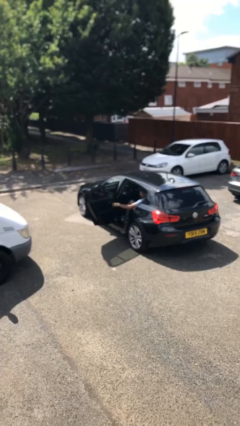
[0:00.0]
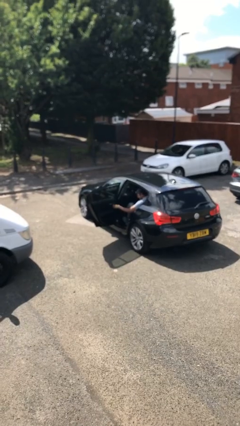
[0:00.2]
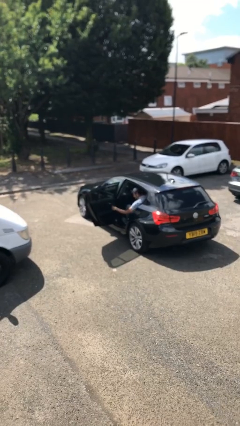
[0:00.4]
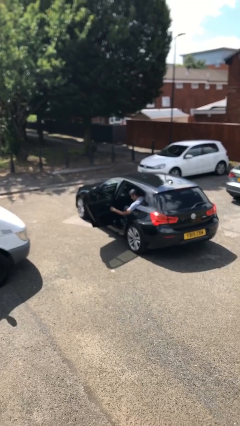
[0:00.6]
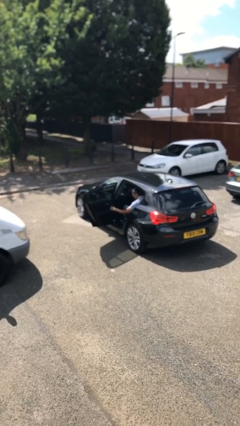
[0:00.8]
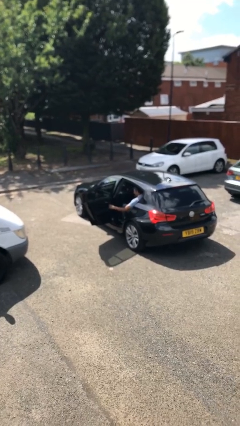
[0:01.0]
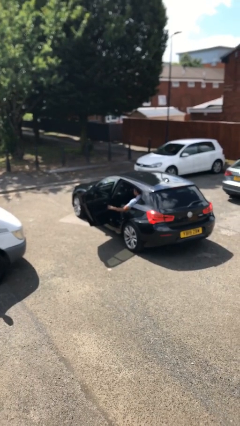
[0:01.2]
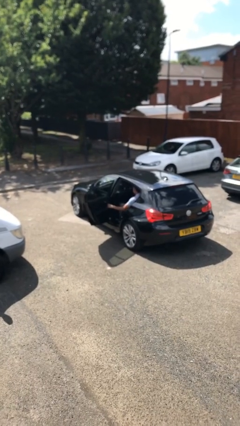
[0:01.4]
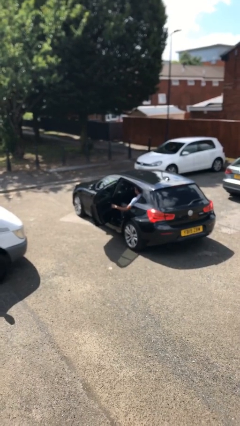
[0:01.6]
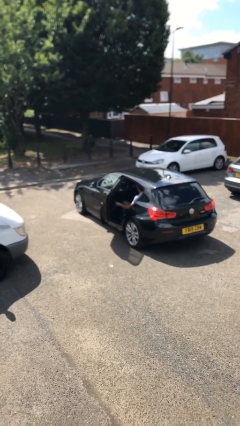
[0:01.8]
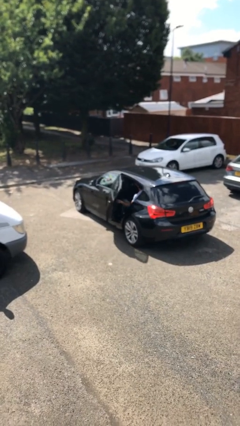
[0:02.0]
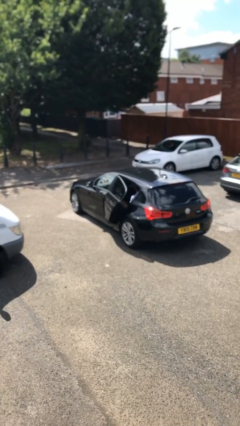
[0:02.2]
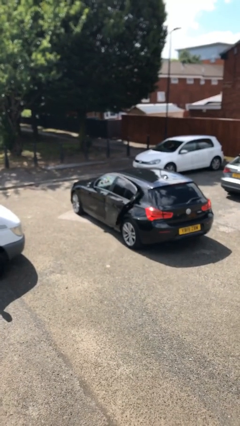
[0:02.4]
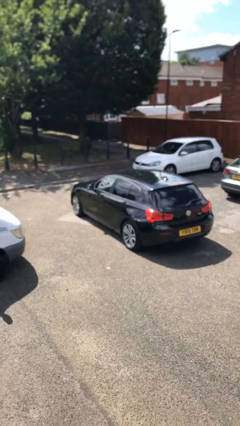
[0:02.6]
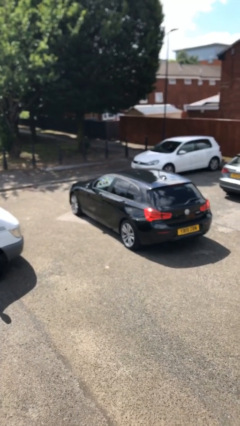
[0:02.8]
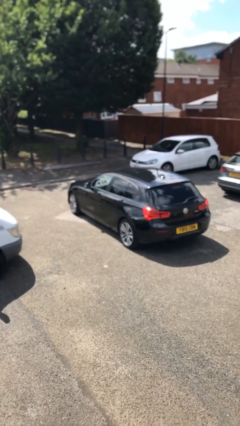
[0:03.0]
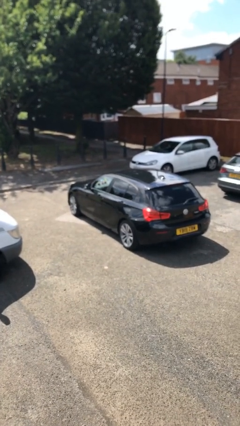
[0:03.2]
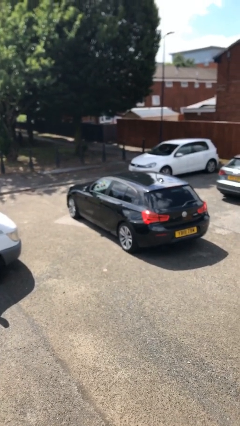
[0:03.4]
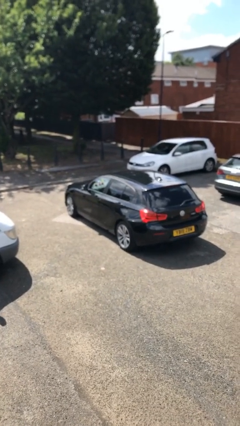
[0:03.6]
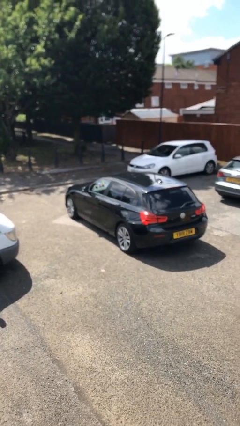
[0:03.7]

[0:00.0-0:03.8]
person closes car door

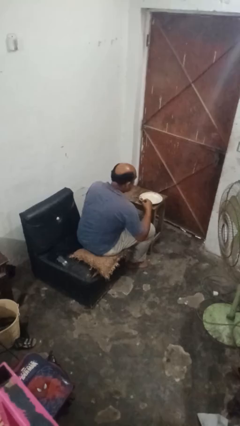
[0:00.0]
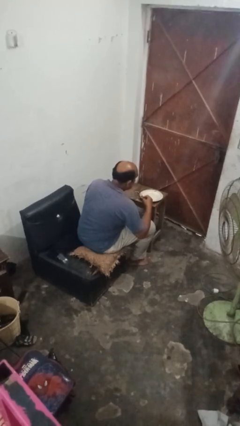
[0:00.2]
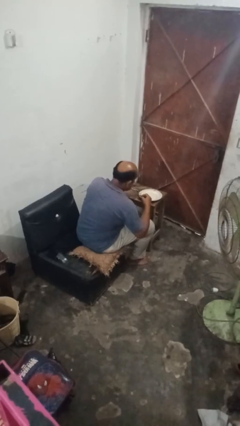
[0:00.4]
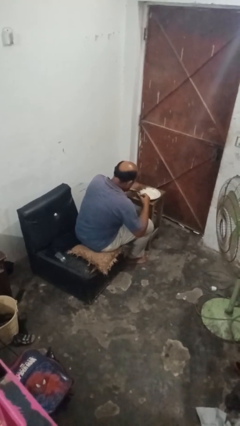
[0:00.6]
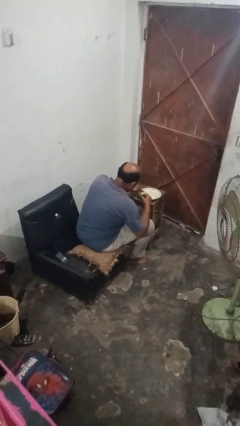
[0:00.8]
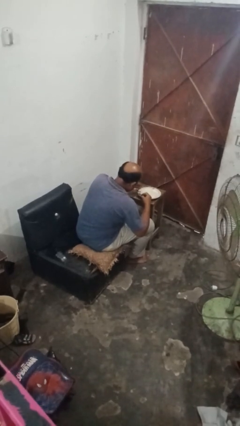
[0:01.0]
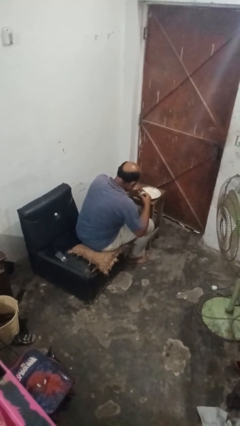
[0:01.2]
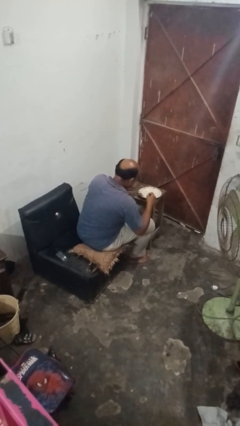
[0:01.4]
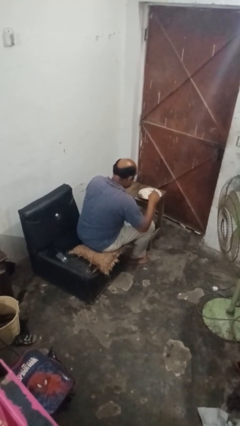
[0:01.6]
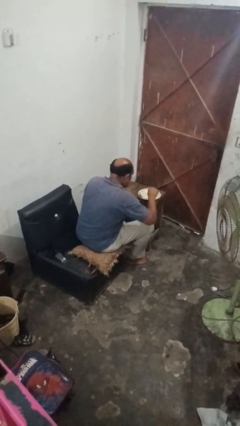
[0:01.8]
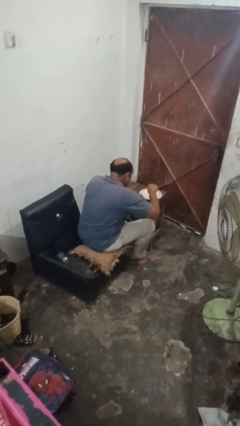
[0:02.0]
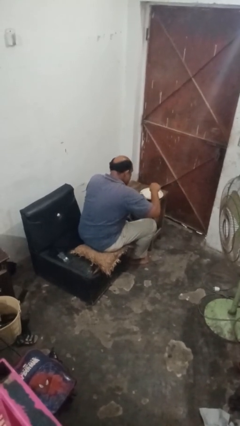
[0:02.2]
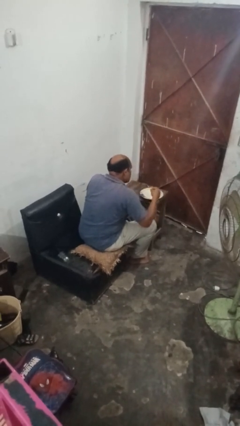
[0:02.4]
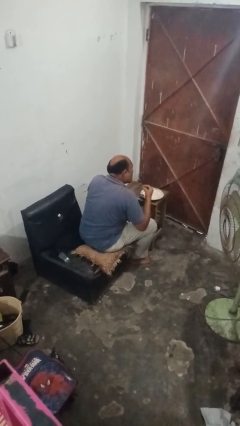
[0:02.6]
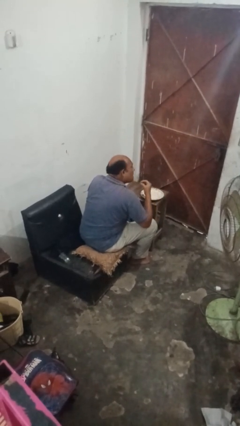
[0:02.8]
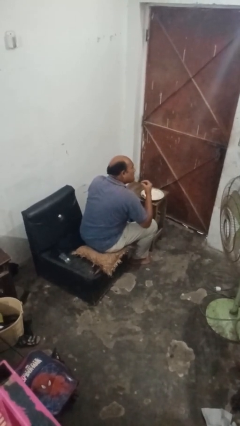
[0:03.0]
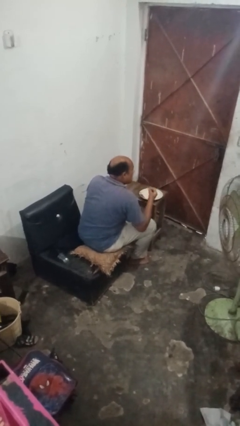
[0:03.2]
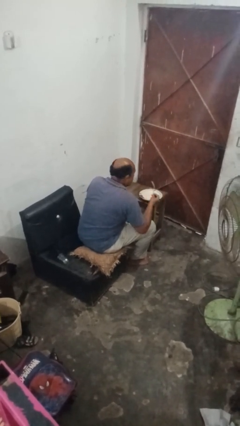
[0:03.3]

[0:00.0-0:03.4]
person eats with utensil

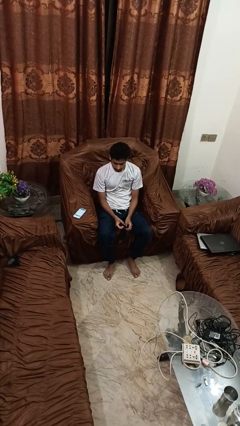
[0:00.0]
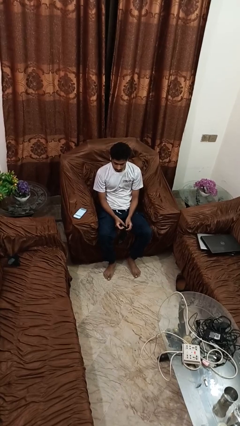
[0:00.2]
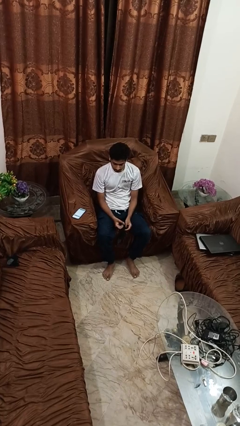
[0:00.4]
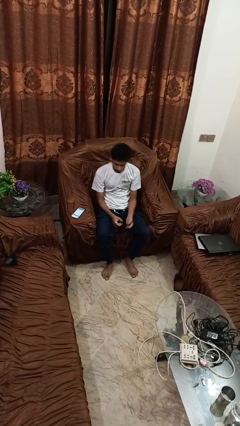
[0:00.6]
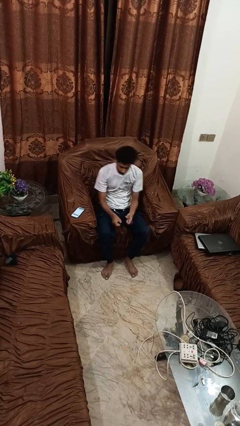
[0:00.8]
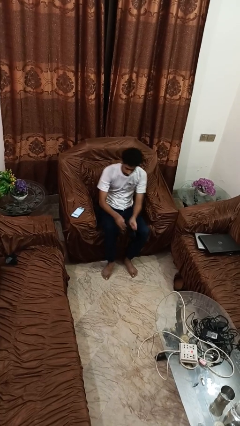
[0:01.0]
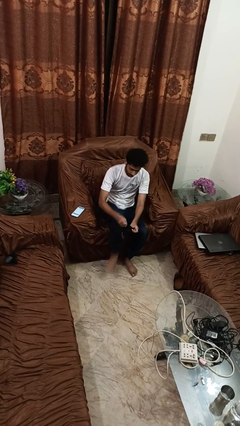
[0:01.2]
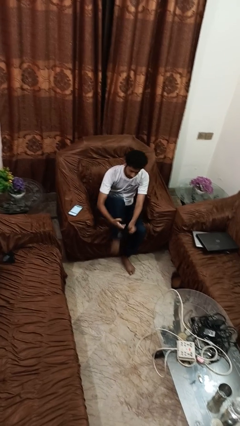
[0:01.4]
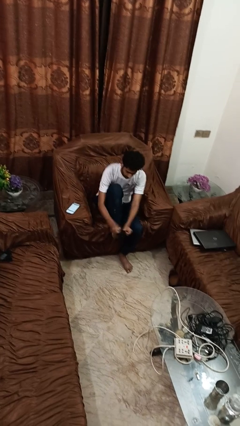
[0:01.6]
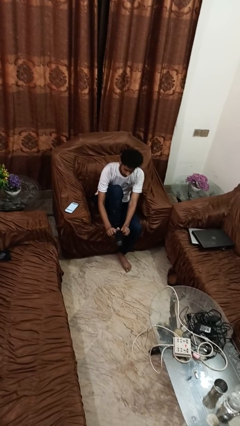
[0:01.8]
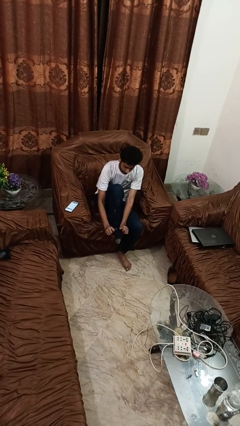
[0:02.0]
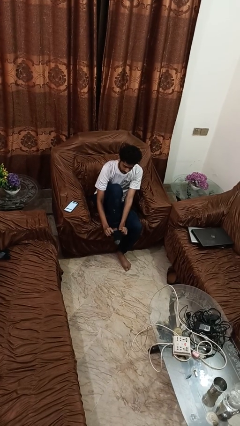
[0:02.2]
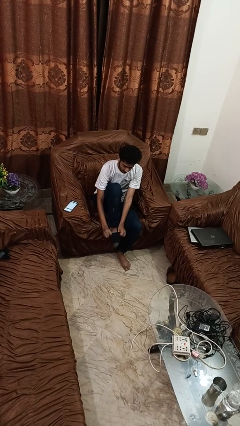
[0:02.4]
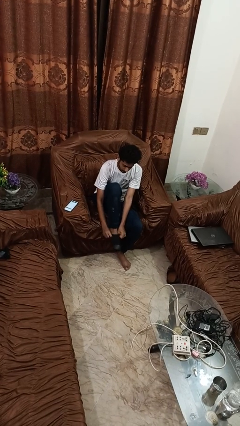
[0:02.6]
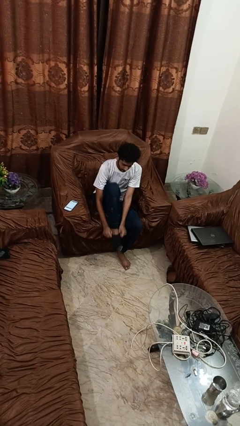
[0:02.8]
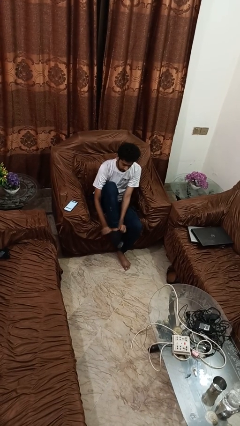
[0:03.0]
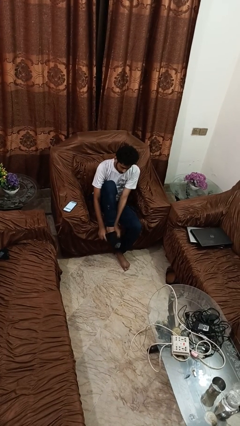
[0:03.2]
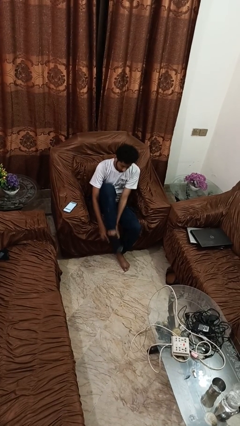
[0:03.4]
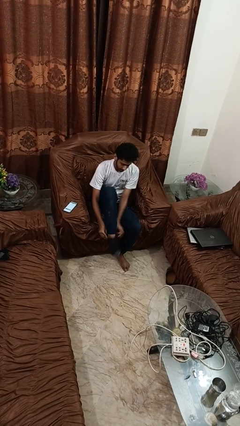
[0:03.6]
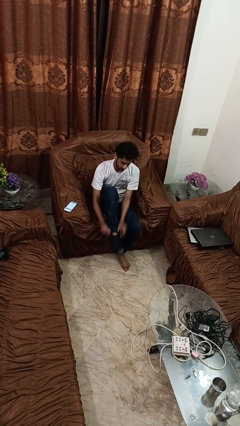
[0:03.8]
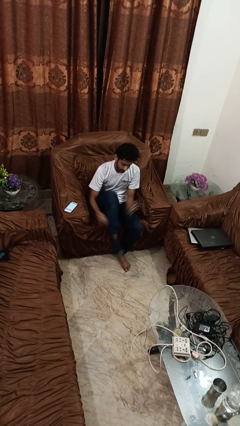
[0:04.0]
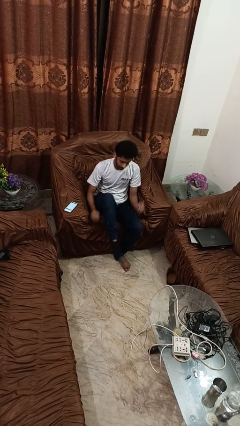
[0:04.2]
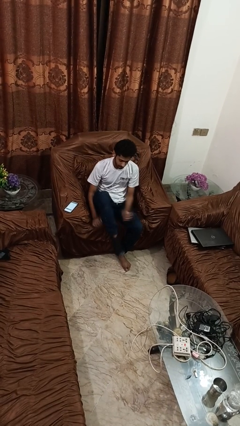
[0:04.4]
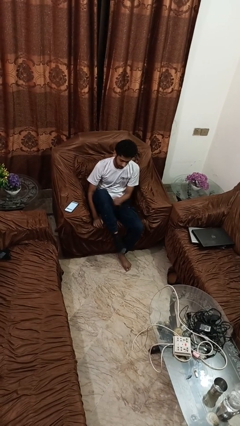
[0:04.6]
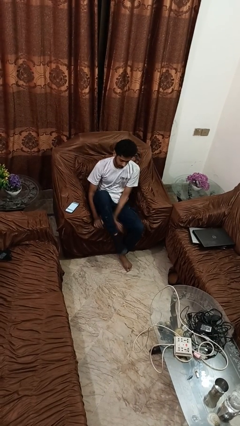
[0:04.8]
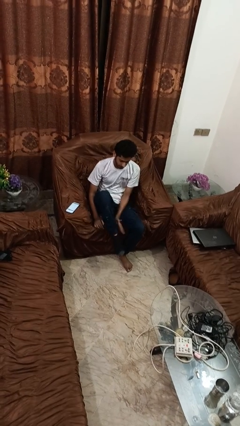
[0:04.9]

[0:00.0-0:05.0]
person puts on socks

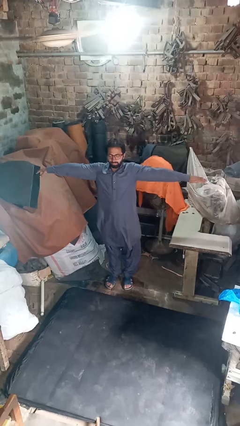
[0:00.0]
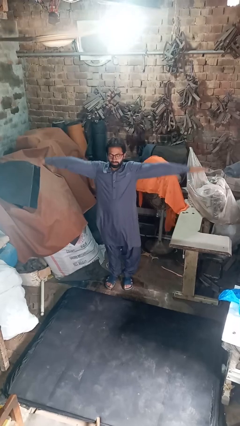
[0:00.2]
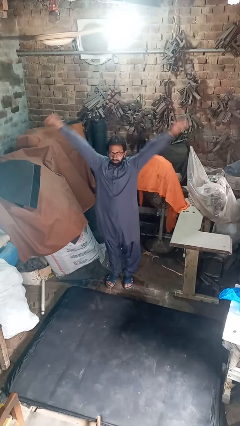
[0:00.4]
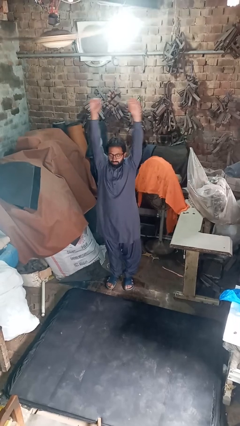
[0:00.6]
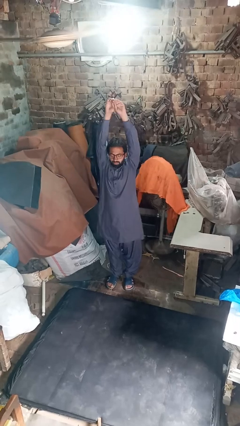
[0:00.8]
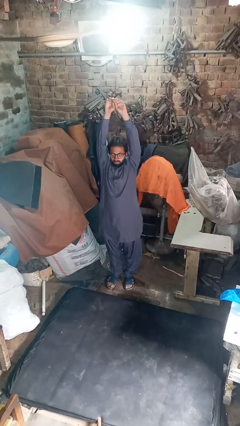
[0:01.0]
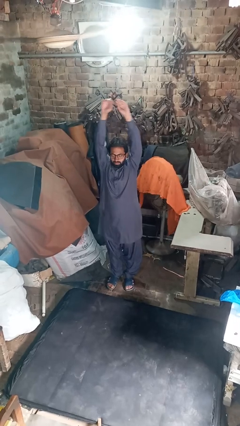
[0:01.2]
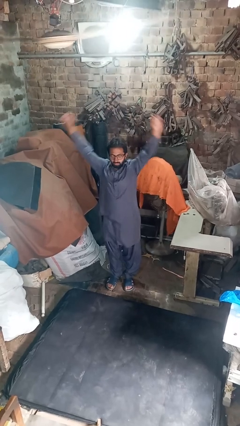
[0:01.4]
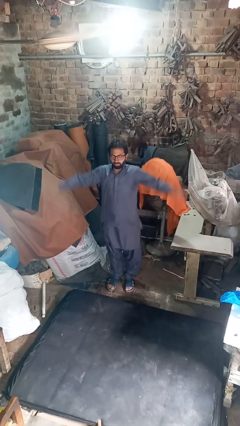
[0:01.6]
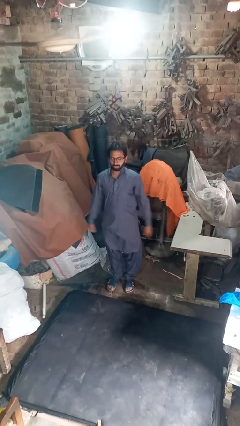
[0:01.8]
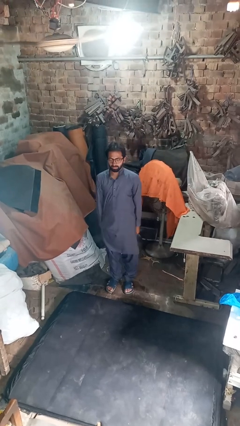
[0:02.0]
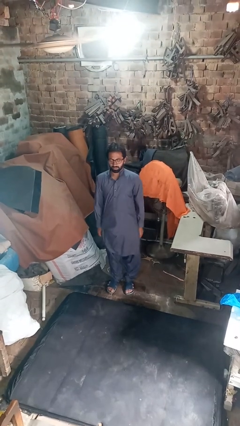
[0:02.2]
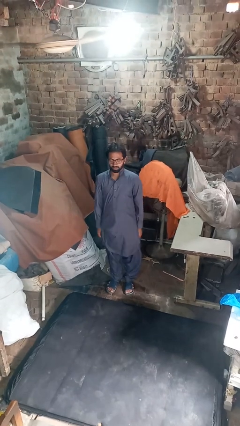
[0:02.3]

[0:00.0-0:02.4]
person stretches arms over head

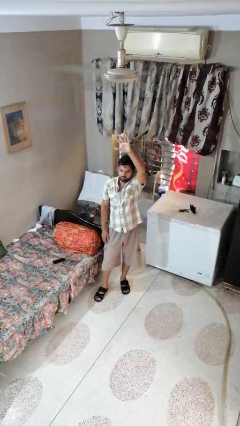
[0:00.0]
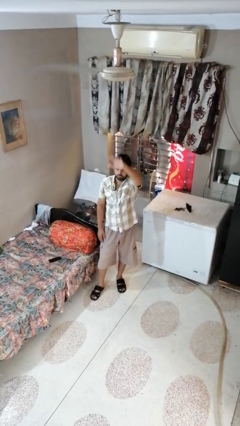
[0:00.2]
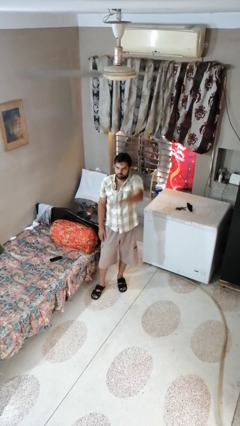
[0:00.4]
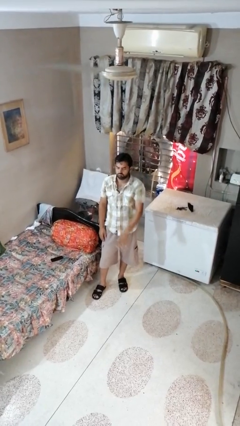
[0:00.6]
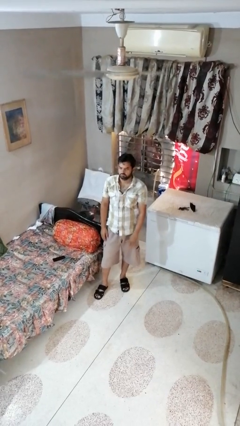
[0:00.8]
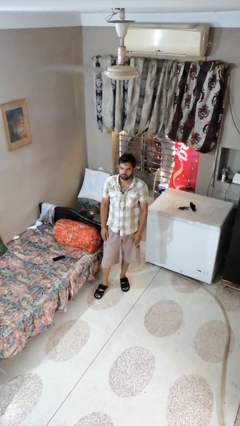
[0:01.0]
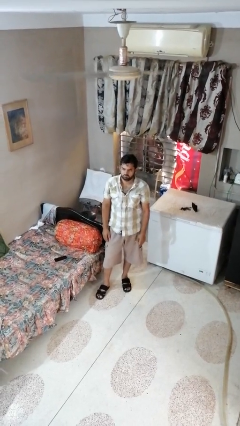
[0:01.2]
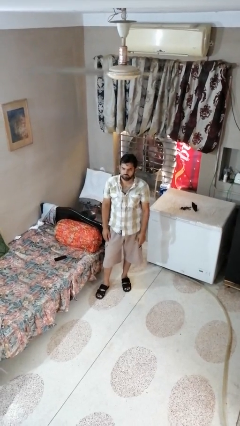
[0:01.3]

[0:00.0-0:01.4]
person gestures swipe down

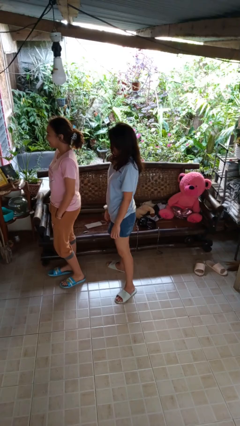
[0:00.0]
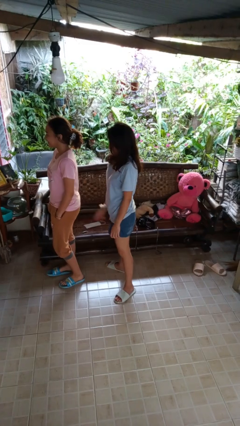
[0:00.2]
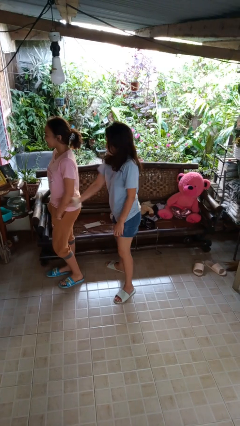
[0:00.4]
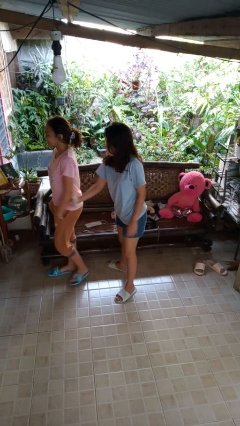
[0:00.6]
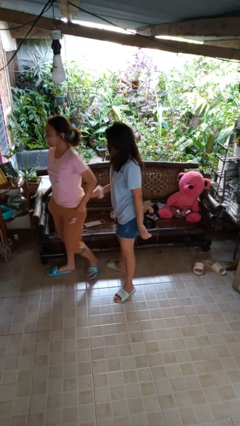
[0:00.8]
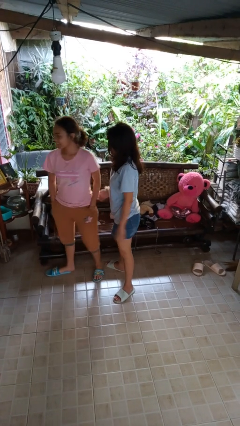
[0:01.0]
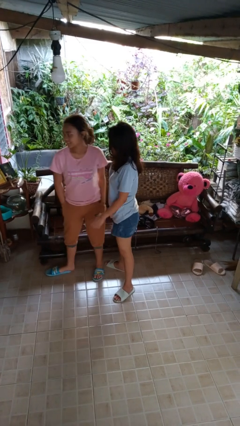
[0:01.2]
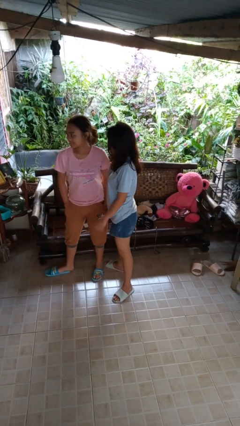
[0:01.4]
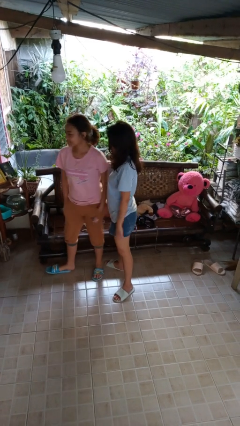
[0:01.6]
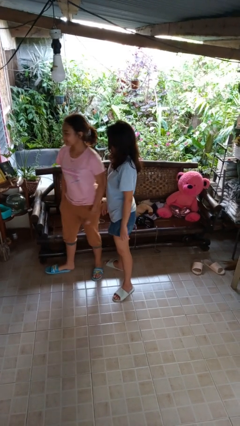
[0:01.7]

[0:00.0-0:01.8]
person grabs person by forearm
